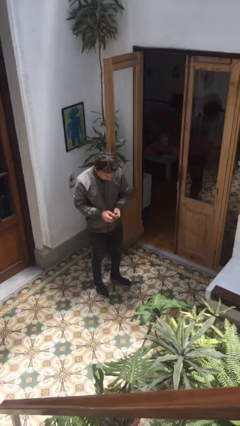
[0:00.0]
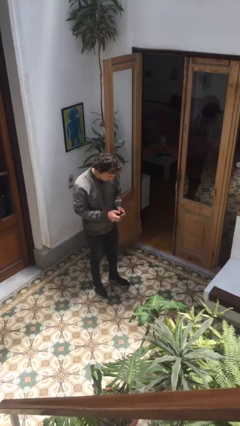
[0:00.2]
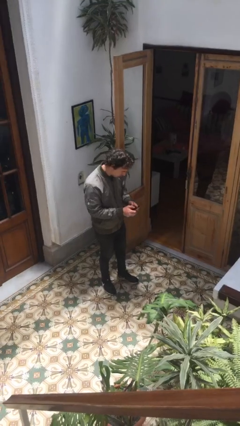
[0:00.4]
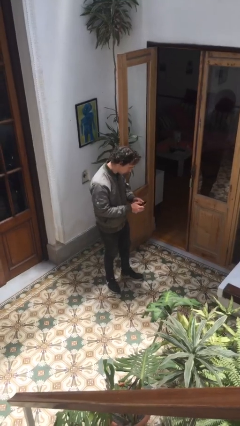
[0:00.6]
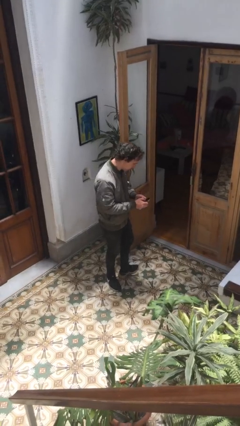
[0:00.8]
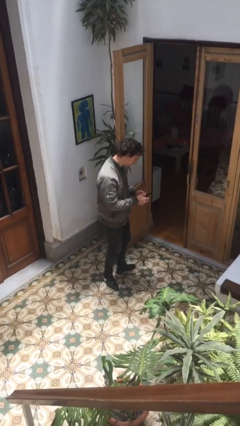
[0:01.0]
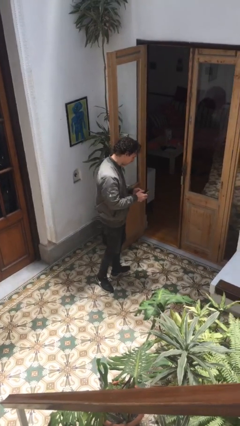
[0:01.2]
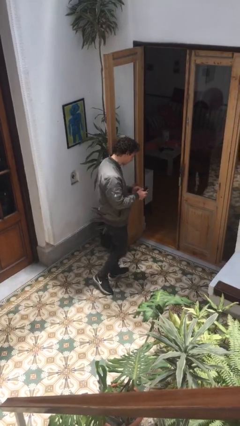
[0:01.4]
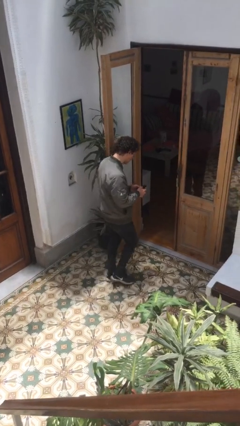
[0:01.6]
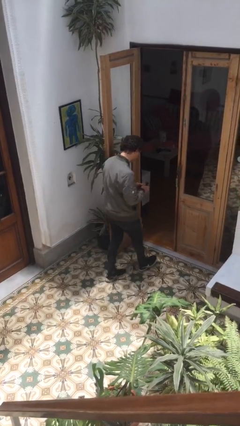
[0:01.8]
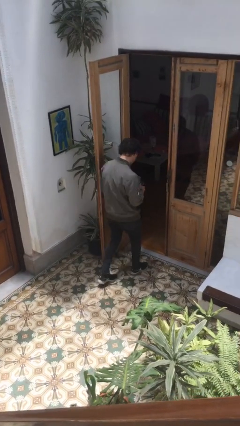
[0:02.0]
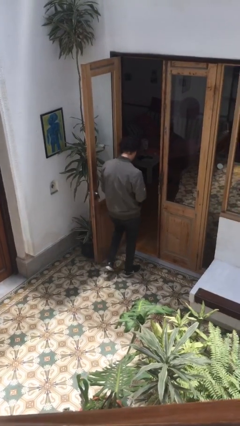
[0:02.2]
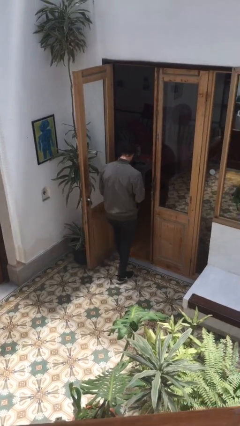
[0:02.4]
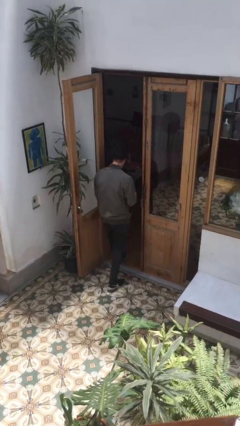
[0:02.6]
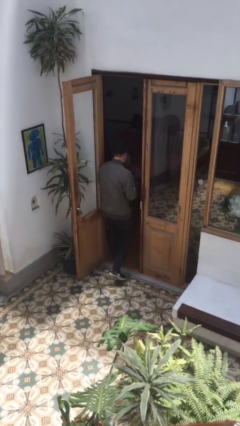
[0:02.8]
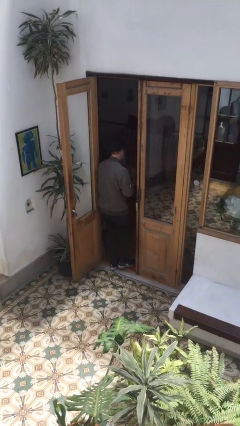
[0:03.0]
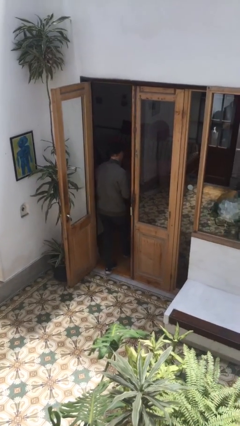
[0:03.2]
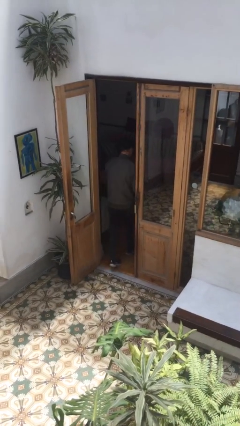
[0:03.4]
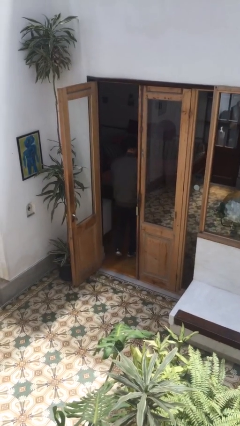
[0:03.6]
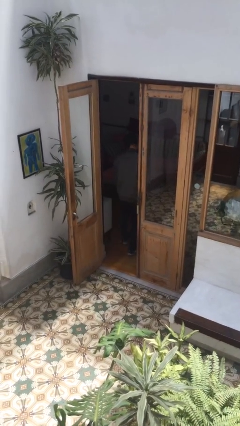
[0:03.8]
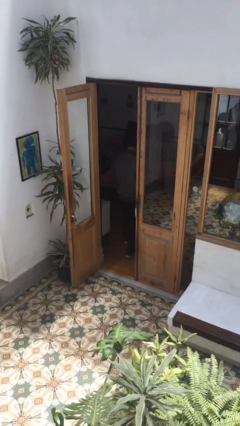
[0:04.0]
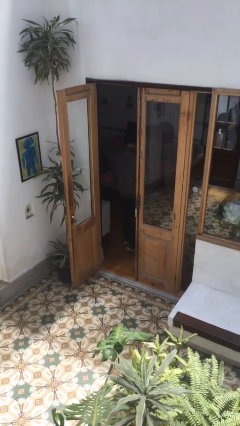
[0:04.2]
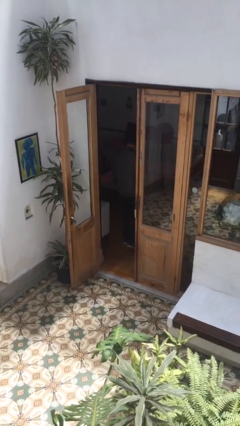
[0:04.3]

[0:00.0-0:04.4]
person exits scene through structure

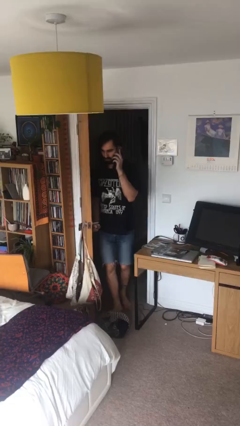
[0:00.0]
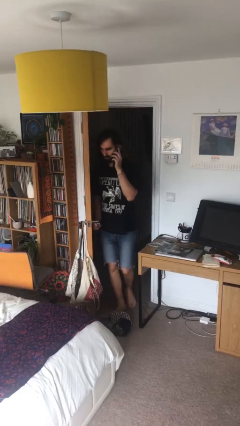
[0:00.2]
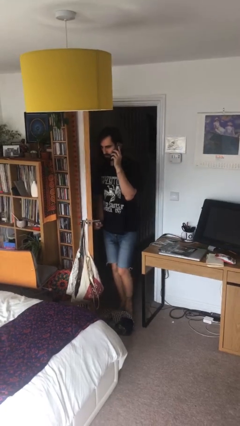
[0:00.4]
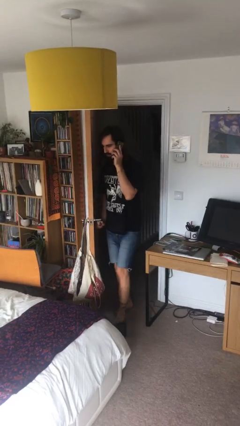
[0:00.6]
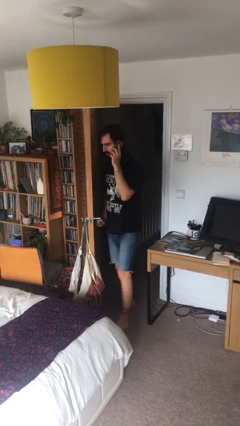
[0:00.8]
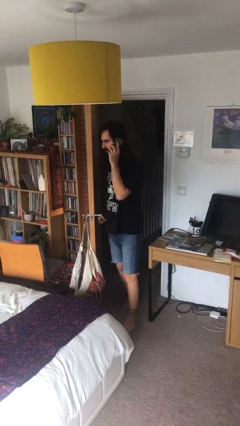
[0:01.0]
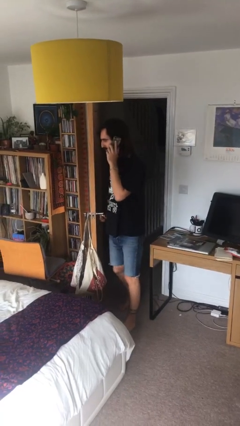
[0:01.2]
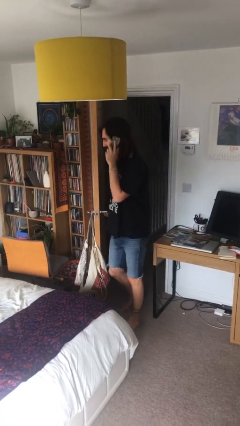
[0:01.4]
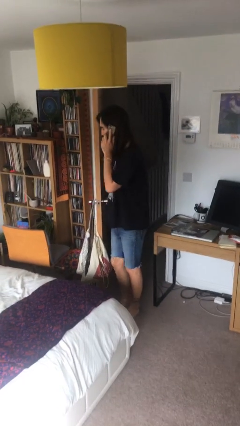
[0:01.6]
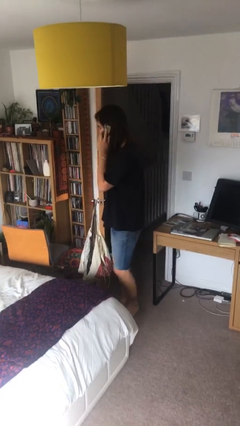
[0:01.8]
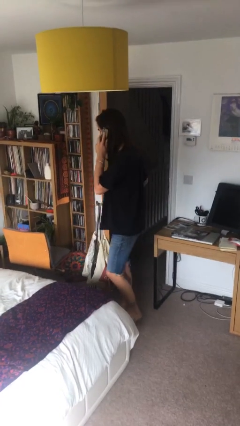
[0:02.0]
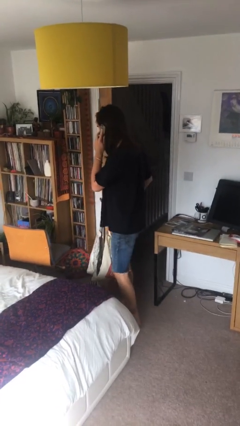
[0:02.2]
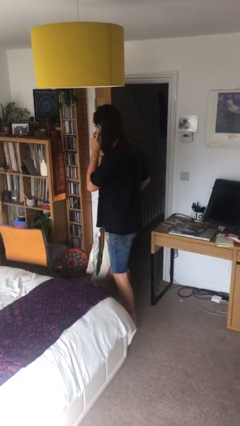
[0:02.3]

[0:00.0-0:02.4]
person enters scene through structure

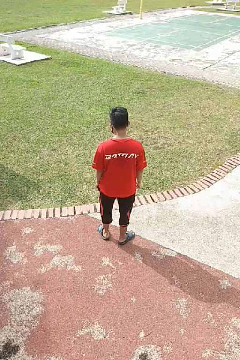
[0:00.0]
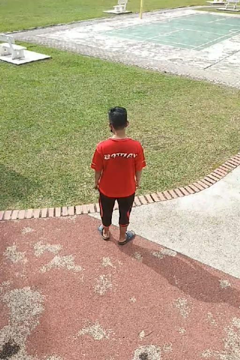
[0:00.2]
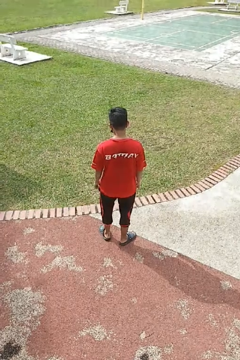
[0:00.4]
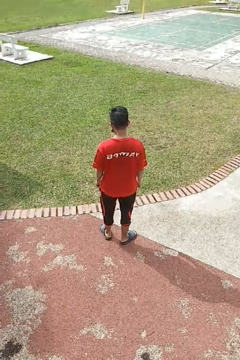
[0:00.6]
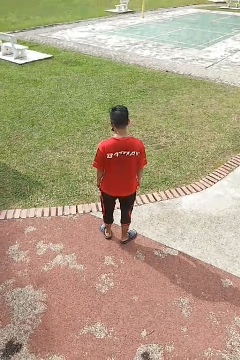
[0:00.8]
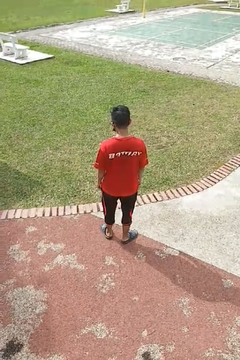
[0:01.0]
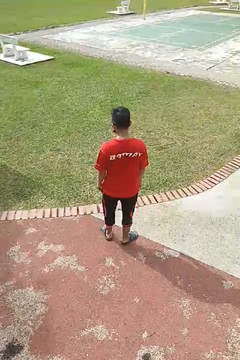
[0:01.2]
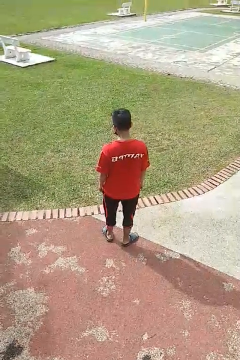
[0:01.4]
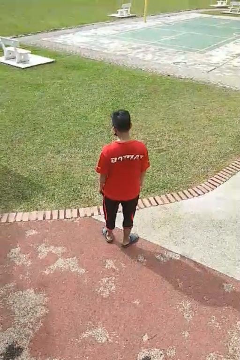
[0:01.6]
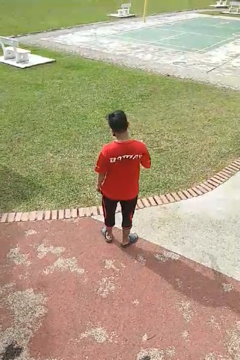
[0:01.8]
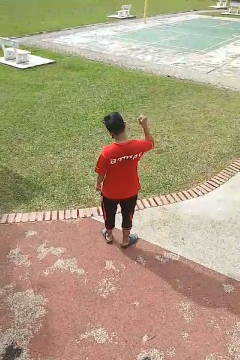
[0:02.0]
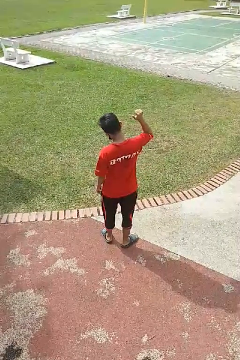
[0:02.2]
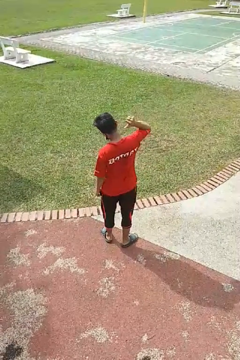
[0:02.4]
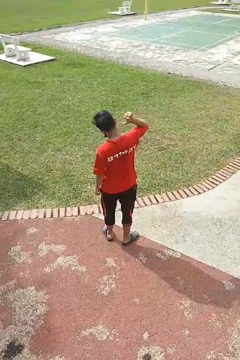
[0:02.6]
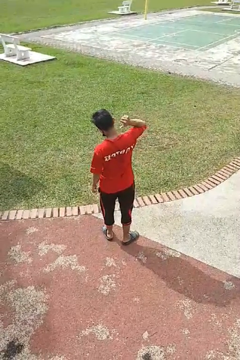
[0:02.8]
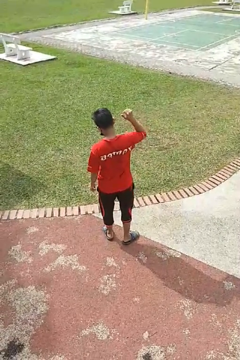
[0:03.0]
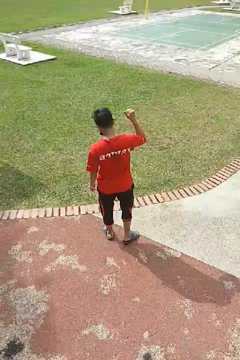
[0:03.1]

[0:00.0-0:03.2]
person gestures behind me

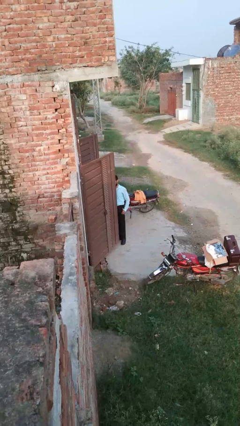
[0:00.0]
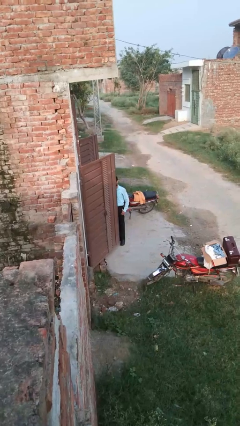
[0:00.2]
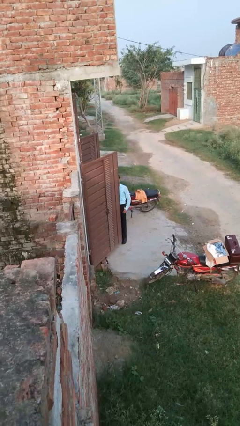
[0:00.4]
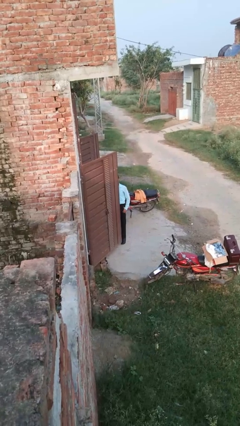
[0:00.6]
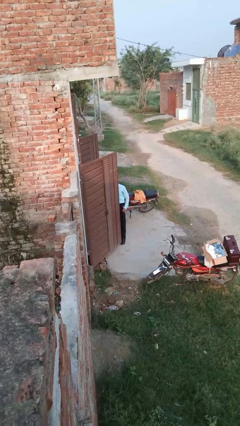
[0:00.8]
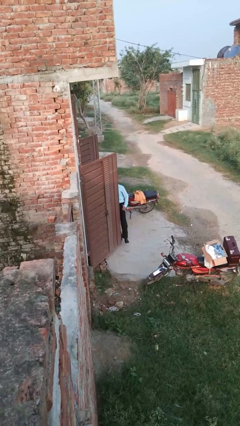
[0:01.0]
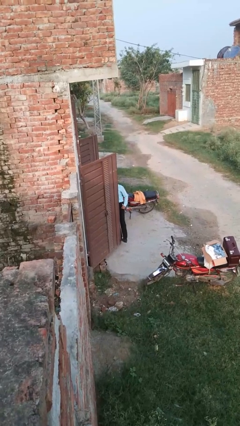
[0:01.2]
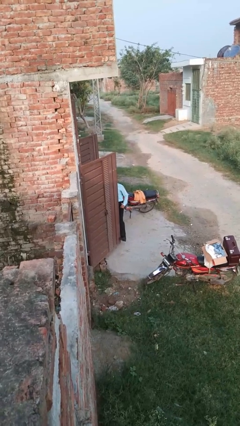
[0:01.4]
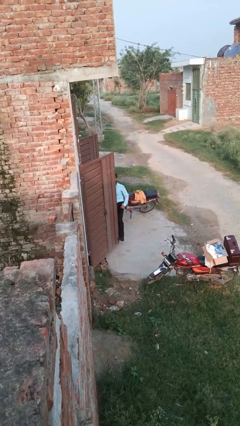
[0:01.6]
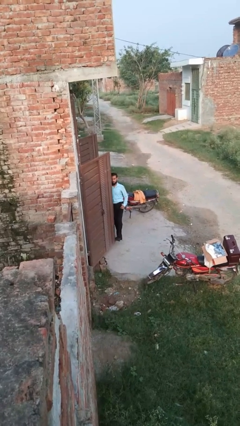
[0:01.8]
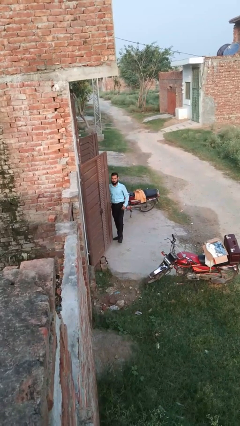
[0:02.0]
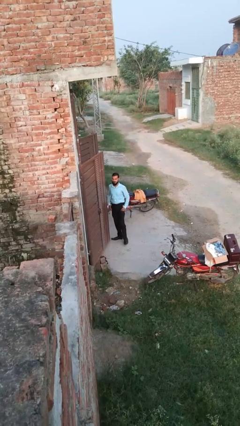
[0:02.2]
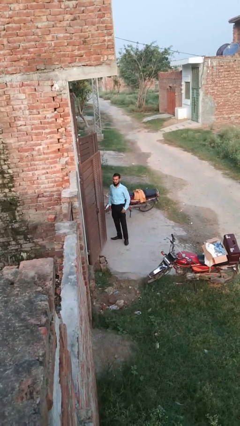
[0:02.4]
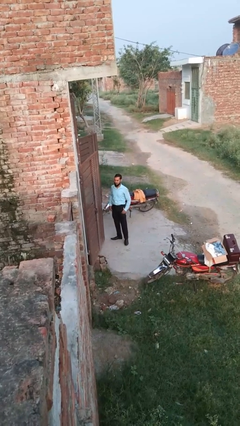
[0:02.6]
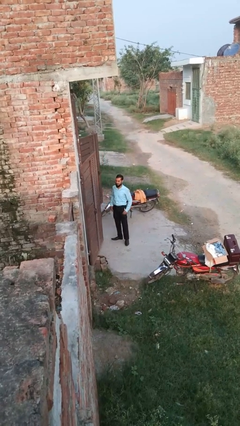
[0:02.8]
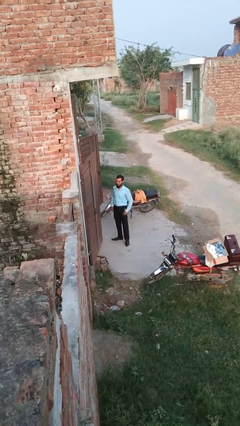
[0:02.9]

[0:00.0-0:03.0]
person closes door with foot

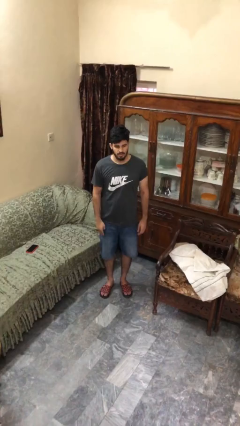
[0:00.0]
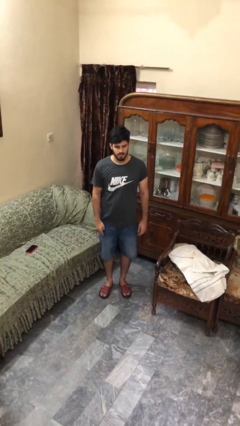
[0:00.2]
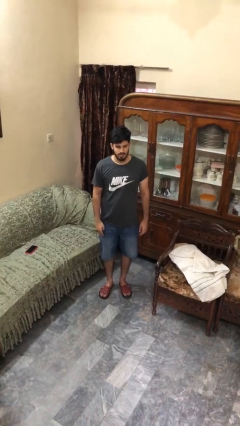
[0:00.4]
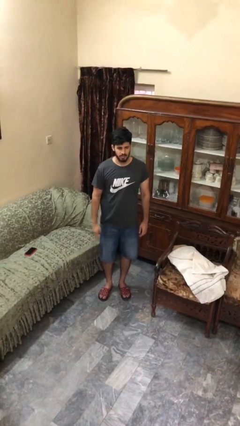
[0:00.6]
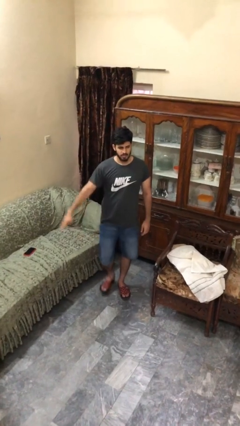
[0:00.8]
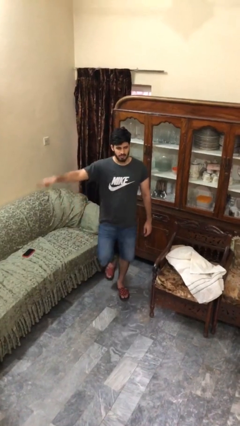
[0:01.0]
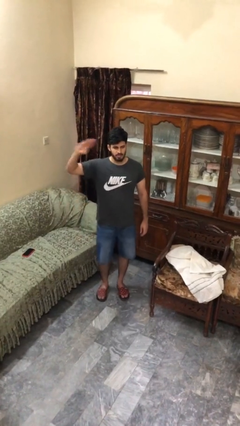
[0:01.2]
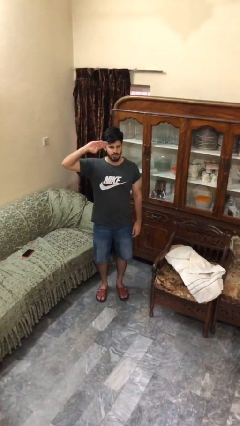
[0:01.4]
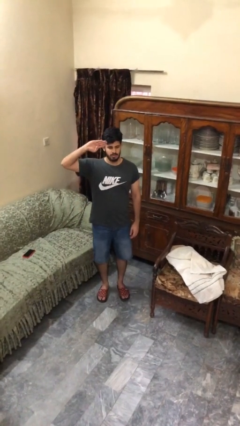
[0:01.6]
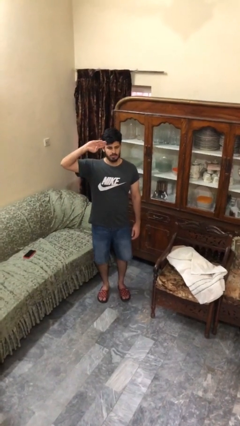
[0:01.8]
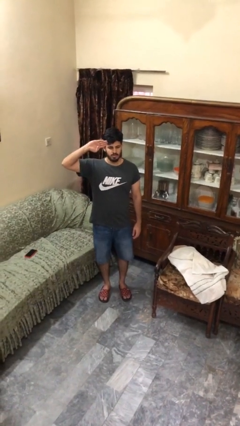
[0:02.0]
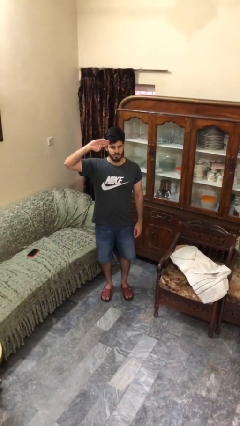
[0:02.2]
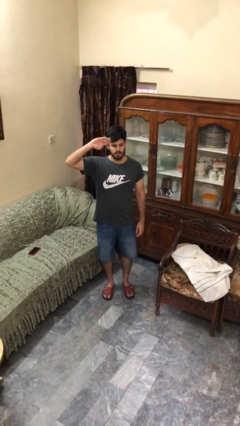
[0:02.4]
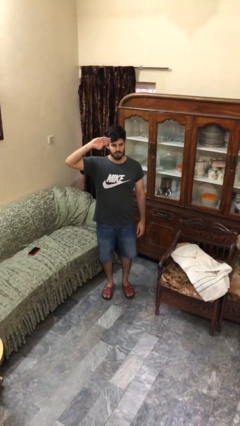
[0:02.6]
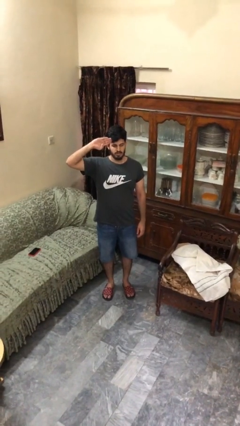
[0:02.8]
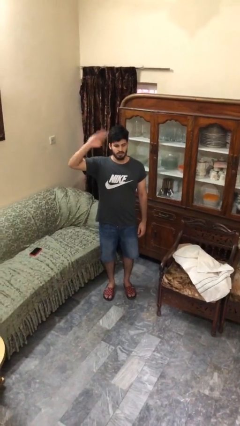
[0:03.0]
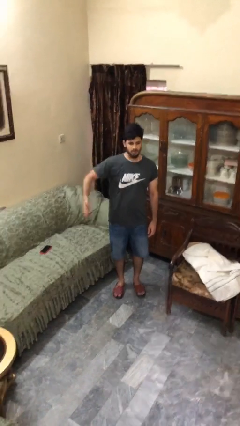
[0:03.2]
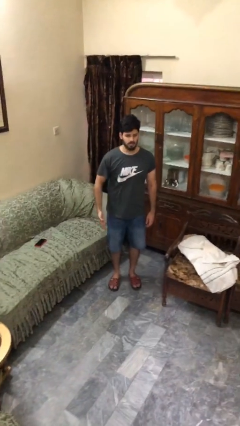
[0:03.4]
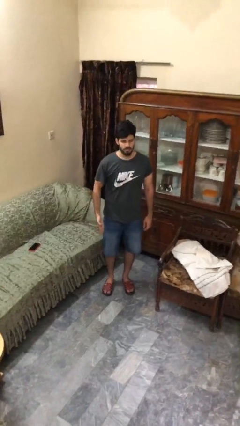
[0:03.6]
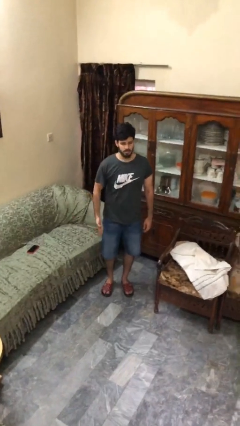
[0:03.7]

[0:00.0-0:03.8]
person salutes

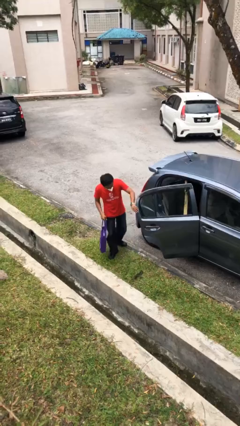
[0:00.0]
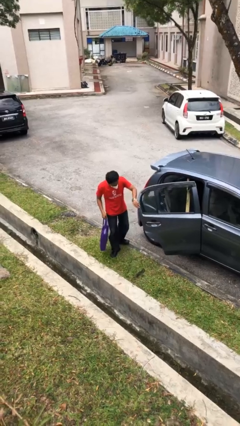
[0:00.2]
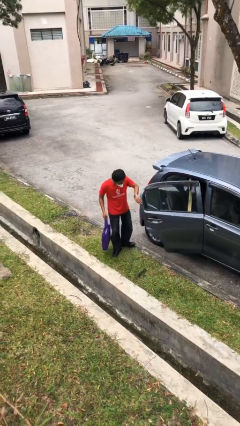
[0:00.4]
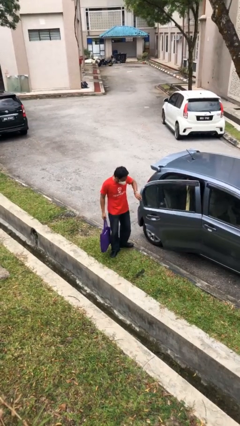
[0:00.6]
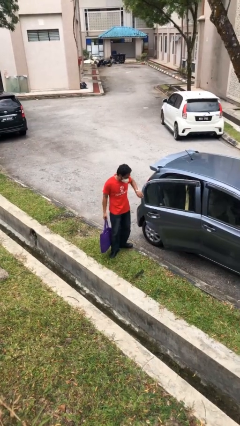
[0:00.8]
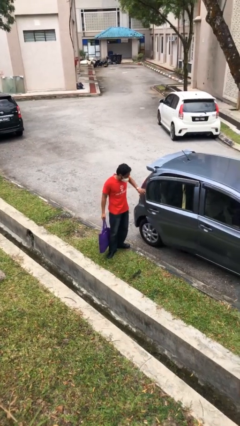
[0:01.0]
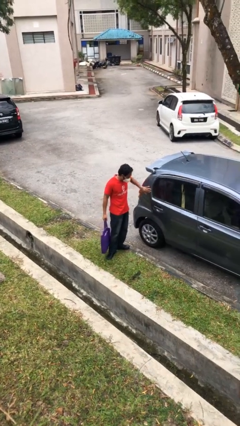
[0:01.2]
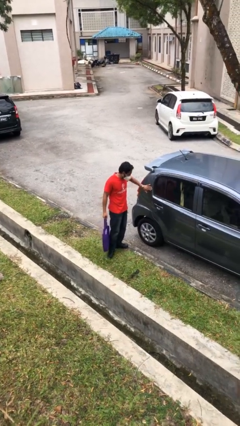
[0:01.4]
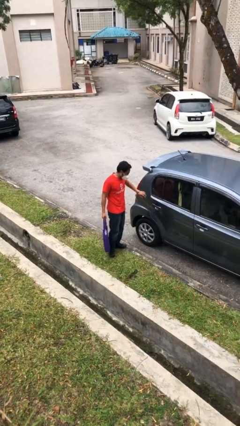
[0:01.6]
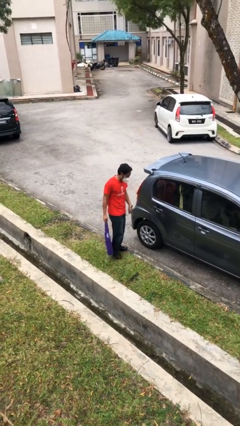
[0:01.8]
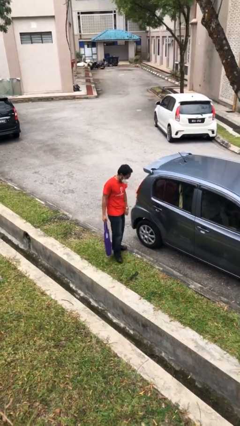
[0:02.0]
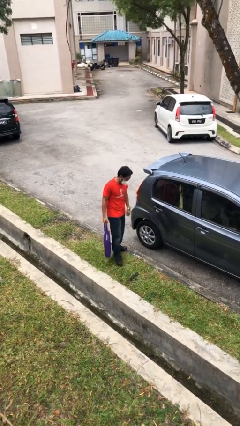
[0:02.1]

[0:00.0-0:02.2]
person closes car door
